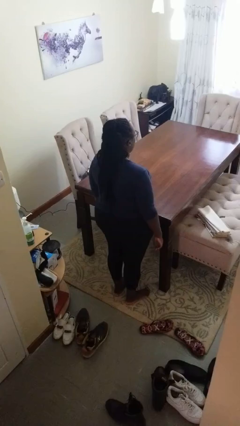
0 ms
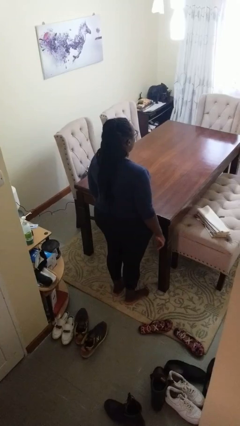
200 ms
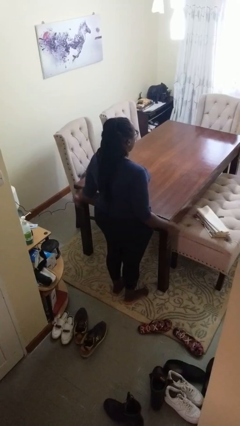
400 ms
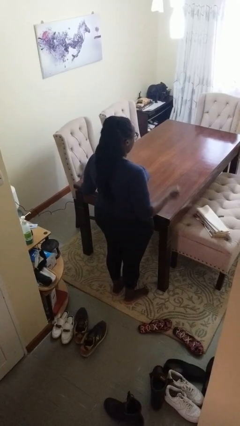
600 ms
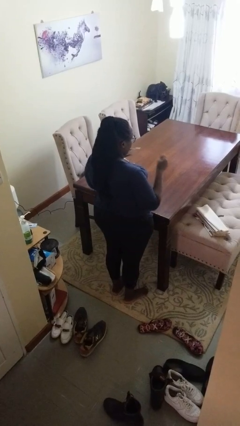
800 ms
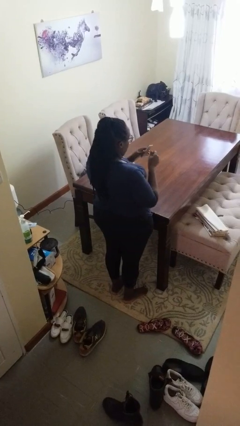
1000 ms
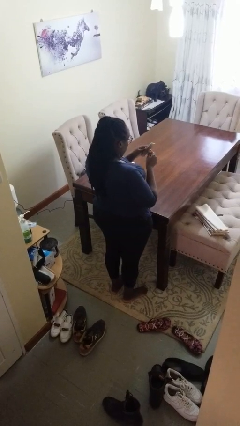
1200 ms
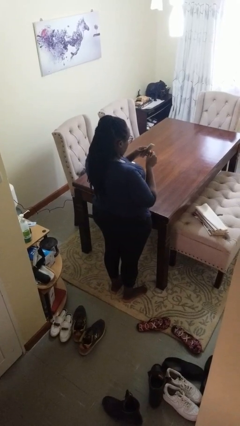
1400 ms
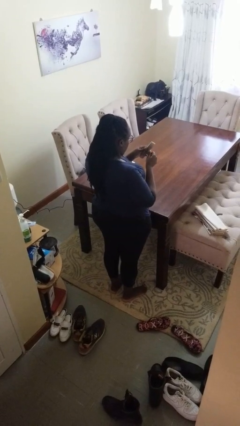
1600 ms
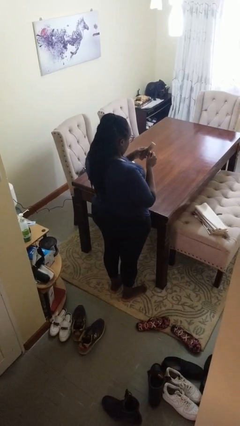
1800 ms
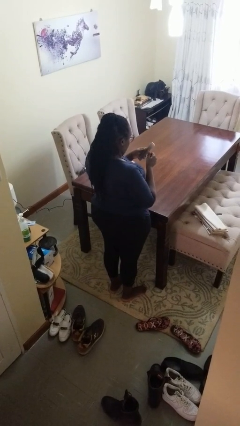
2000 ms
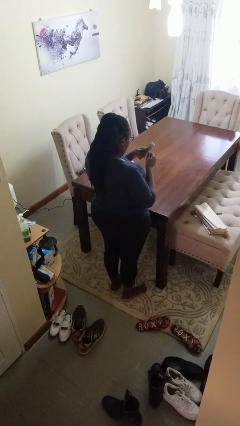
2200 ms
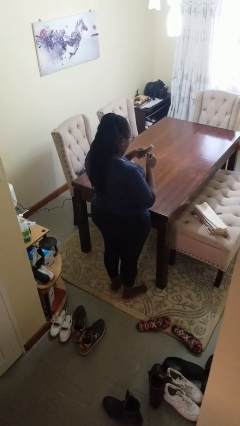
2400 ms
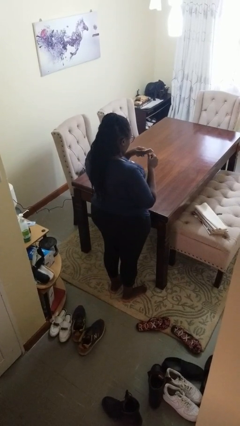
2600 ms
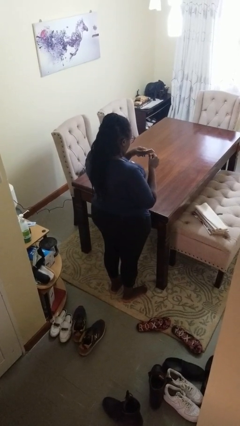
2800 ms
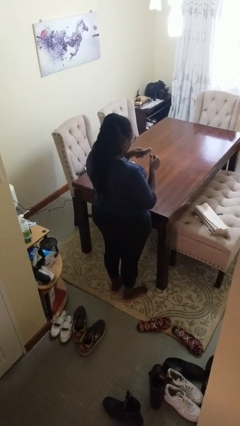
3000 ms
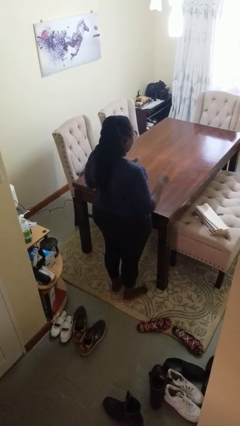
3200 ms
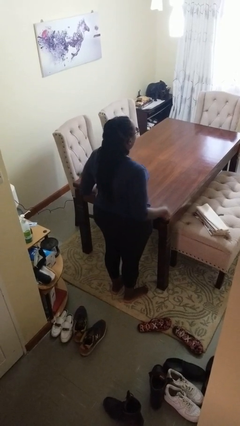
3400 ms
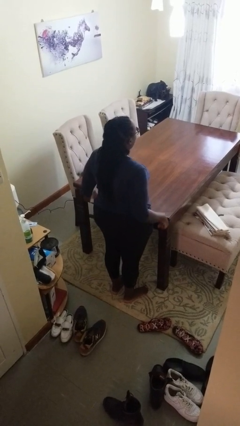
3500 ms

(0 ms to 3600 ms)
person files fingernails

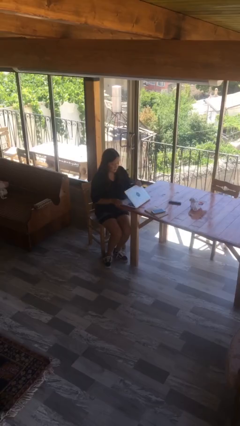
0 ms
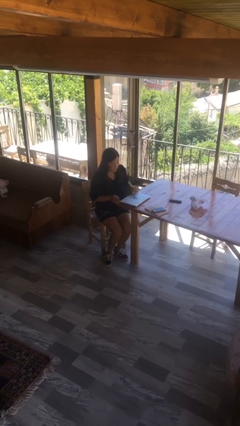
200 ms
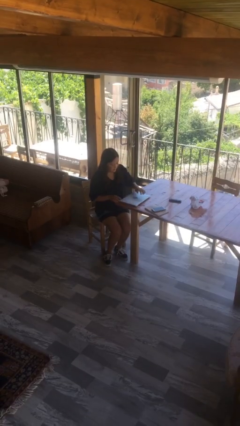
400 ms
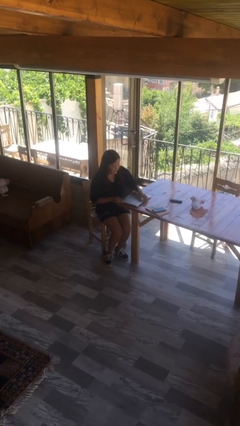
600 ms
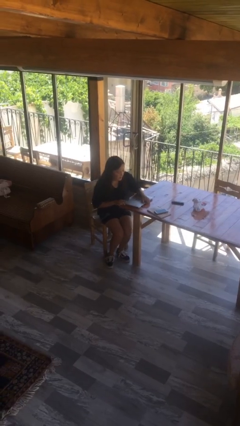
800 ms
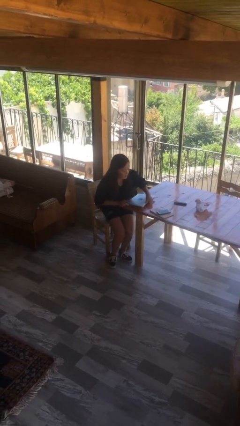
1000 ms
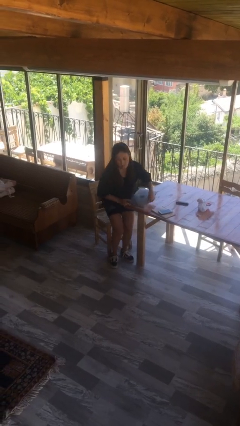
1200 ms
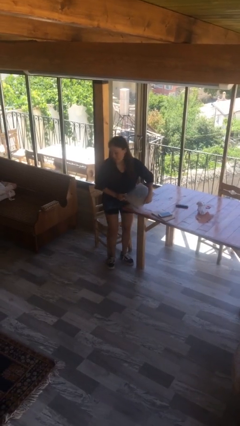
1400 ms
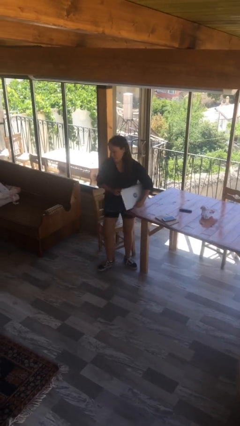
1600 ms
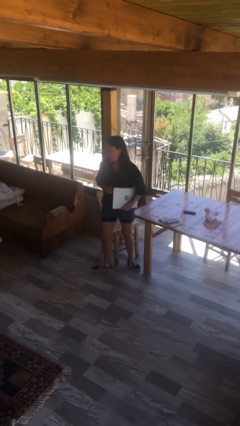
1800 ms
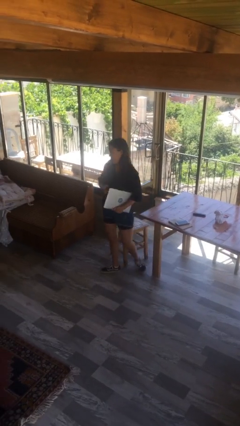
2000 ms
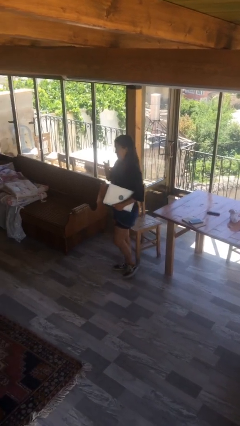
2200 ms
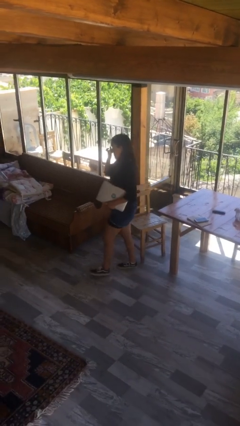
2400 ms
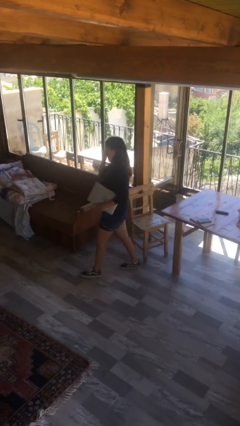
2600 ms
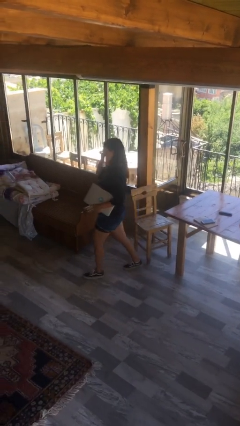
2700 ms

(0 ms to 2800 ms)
person stands up

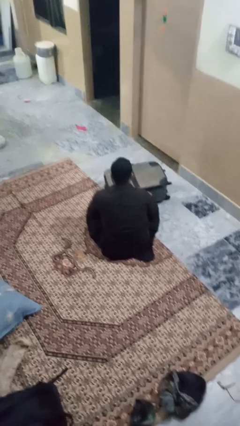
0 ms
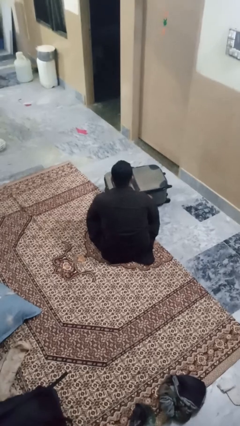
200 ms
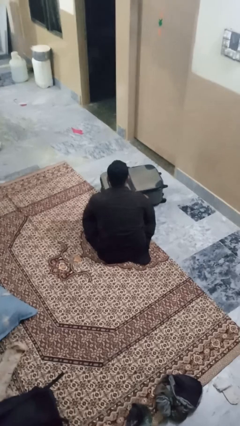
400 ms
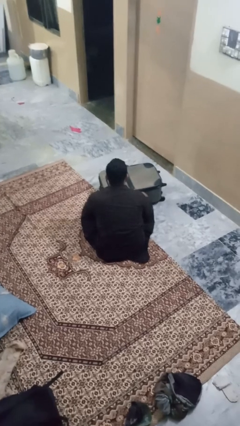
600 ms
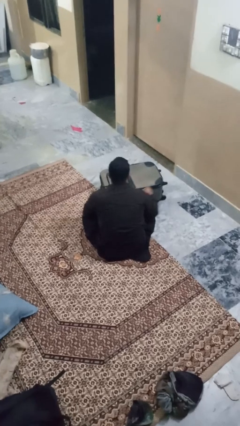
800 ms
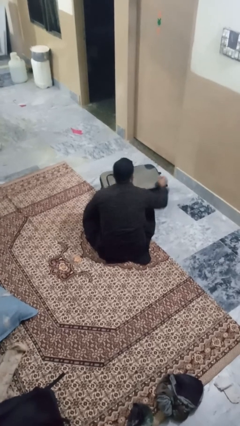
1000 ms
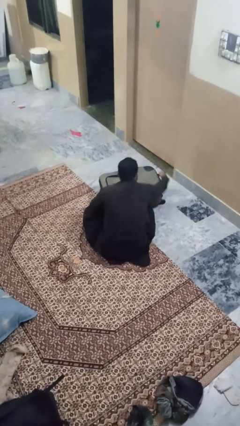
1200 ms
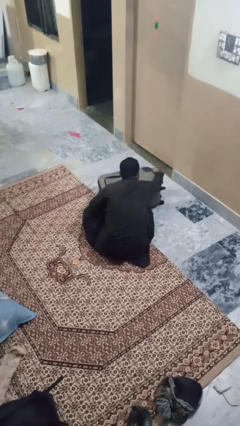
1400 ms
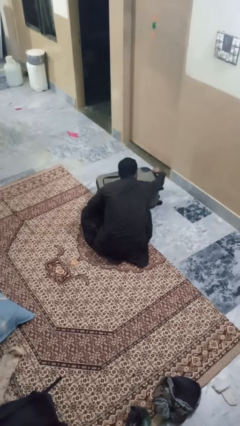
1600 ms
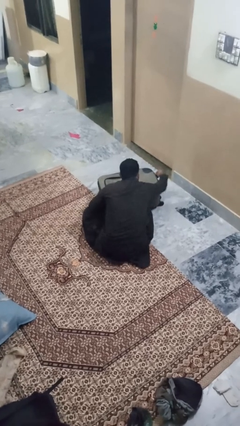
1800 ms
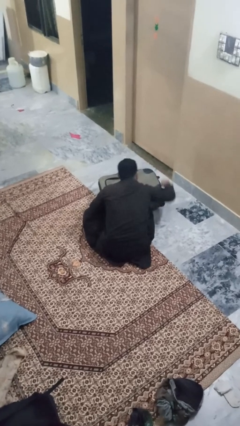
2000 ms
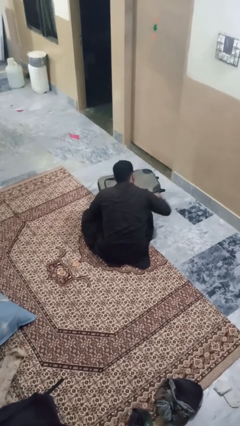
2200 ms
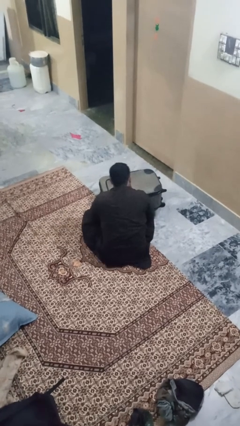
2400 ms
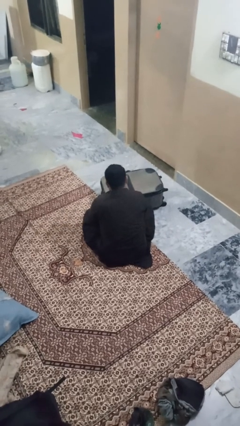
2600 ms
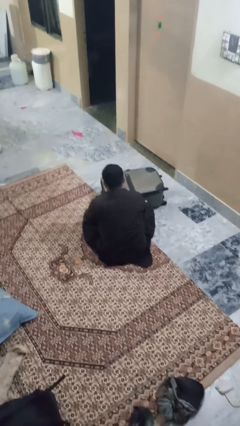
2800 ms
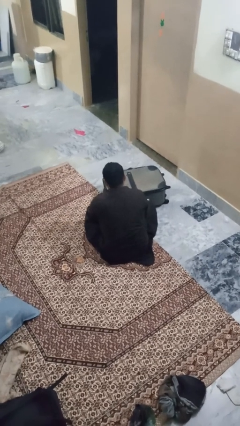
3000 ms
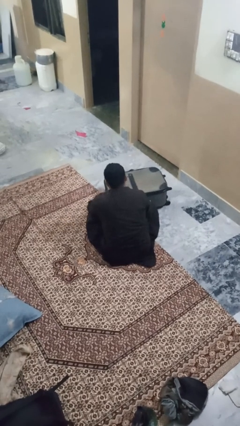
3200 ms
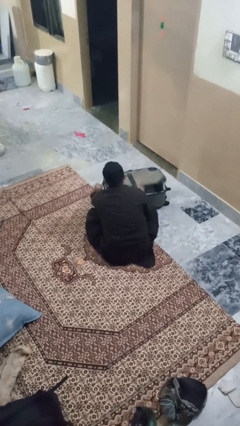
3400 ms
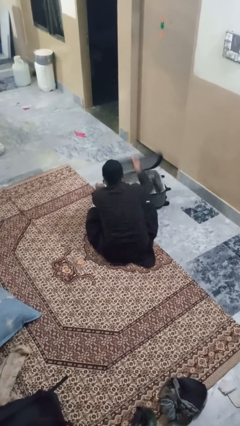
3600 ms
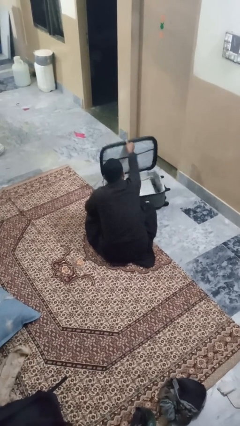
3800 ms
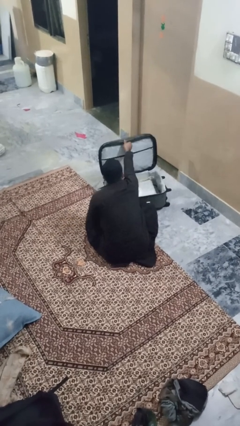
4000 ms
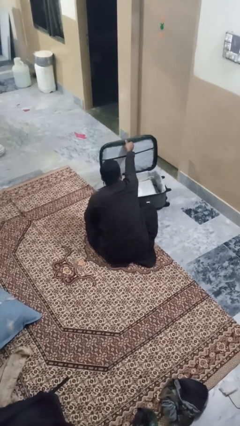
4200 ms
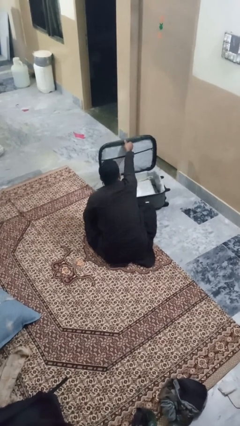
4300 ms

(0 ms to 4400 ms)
person opens suitcase

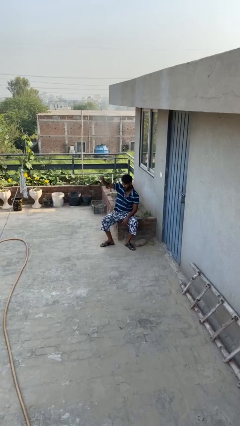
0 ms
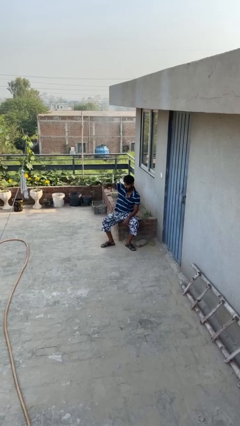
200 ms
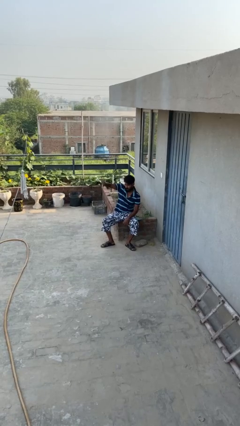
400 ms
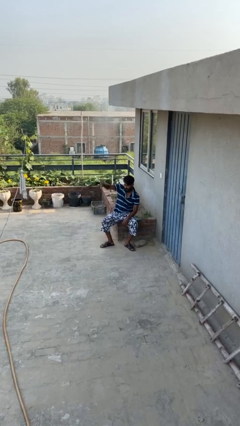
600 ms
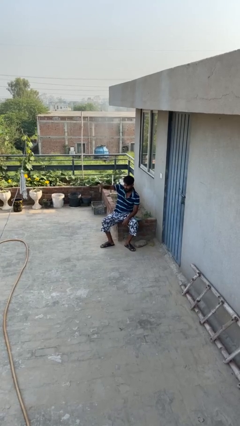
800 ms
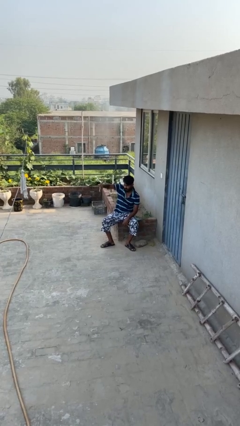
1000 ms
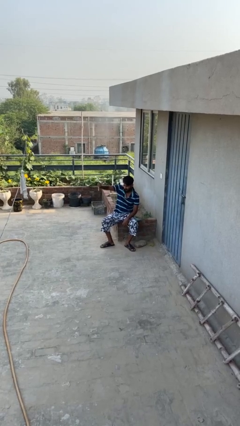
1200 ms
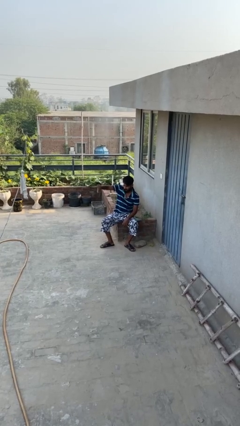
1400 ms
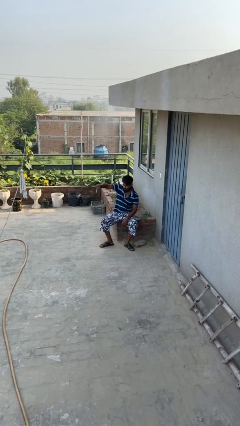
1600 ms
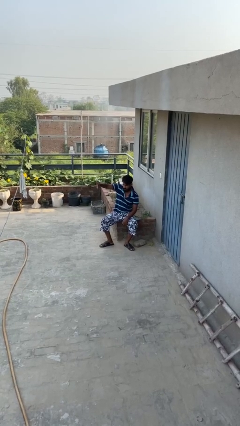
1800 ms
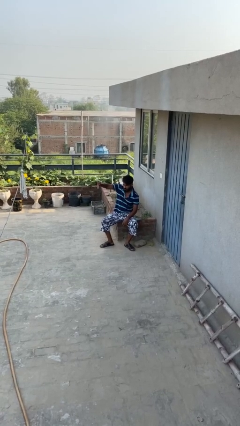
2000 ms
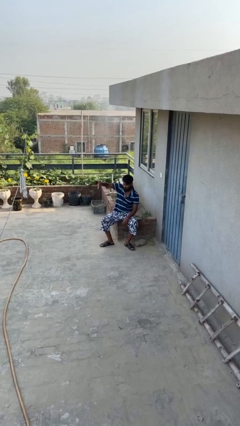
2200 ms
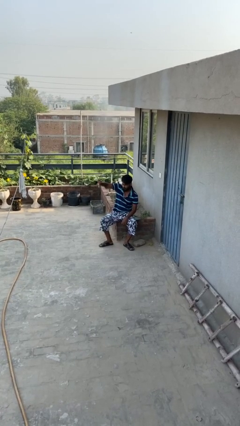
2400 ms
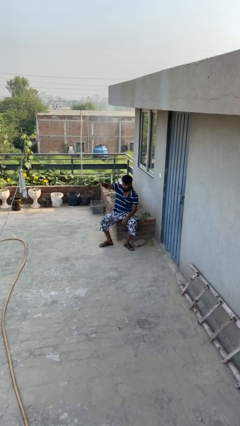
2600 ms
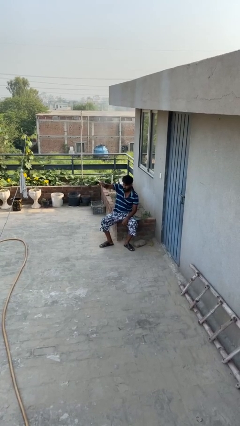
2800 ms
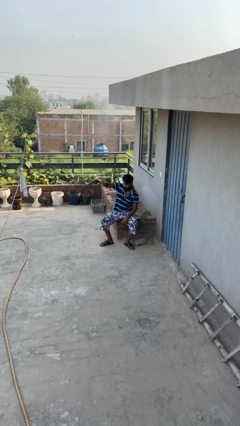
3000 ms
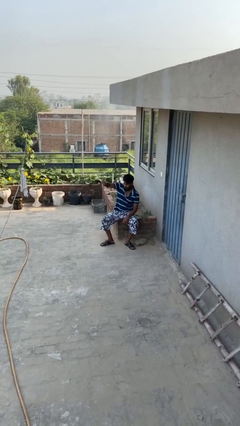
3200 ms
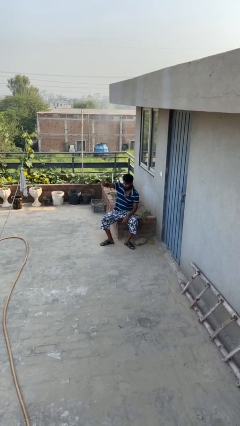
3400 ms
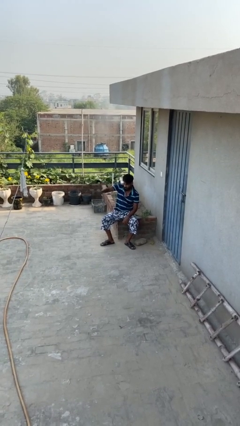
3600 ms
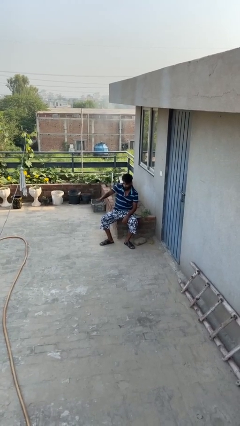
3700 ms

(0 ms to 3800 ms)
person gestures thumbs down

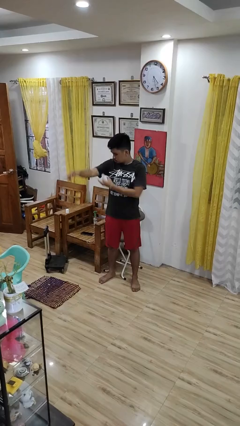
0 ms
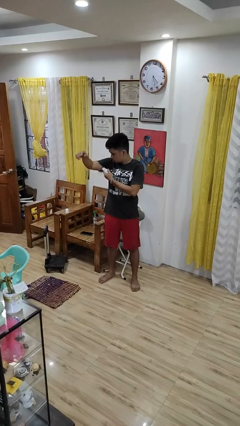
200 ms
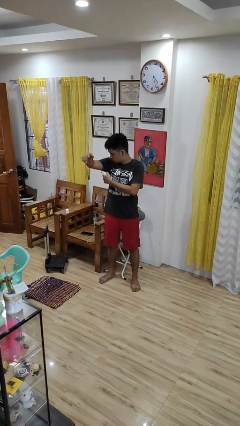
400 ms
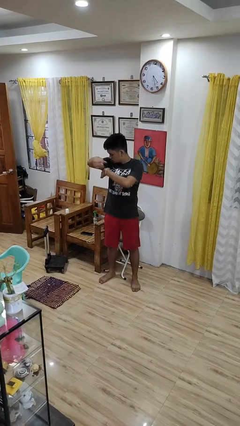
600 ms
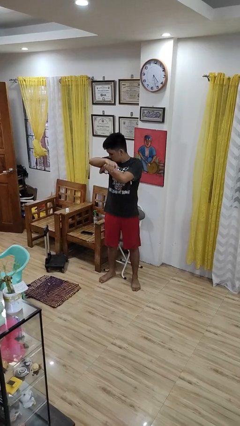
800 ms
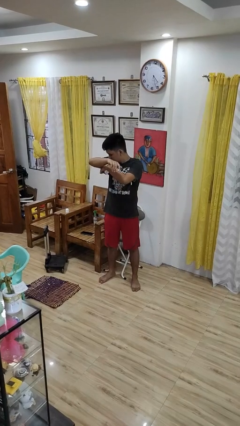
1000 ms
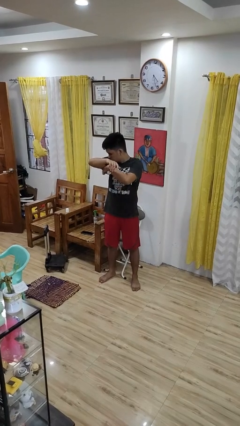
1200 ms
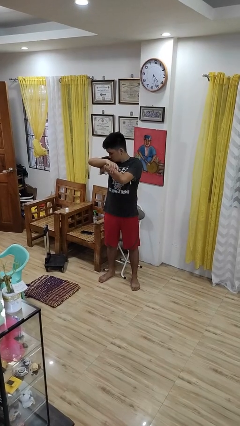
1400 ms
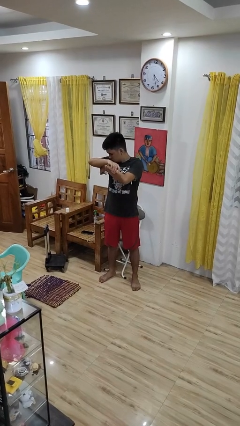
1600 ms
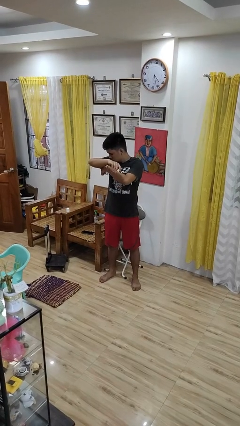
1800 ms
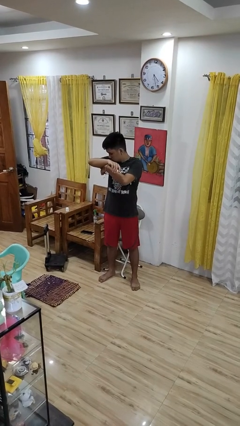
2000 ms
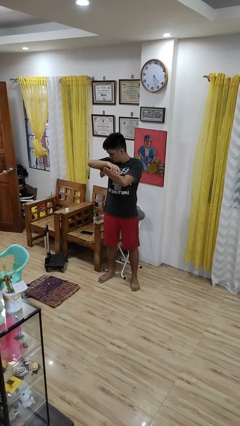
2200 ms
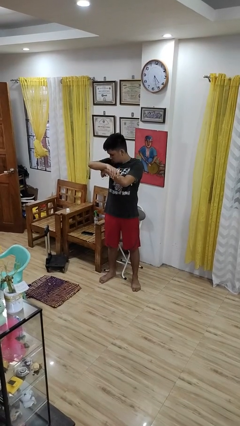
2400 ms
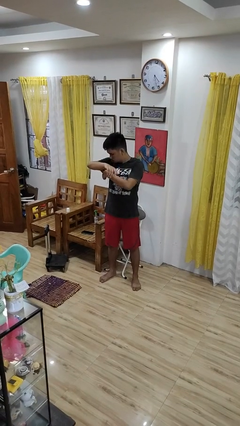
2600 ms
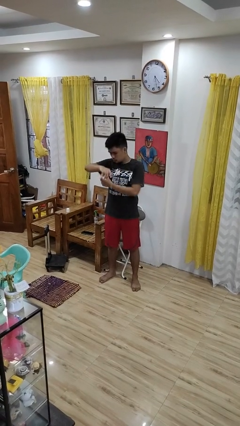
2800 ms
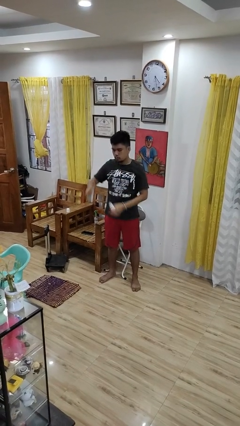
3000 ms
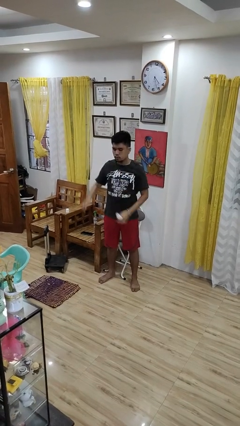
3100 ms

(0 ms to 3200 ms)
person applies deodorant
